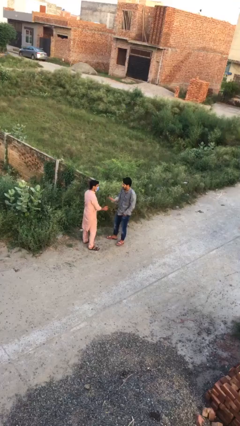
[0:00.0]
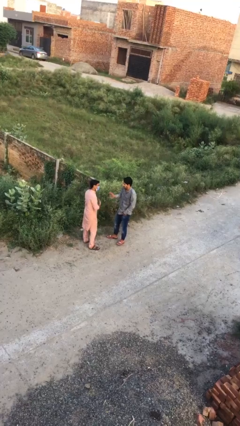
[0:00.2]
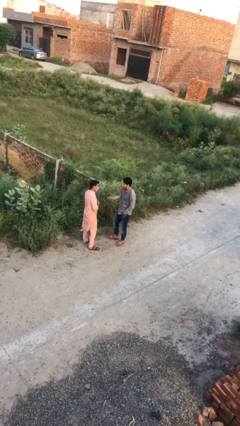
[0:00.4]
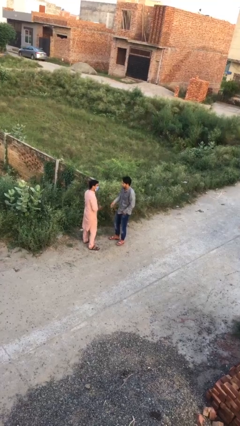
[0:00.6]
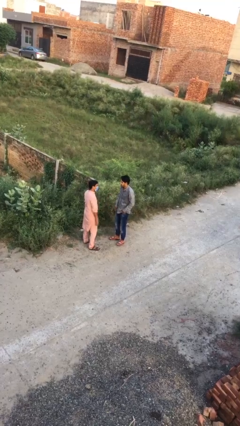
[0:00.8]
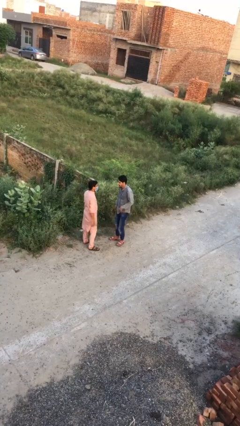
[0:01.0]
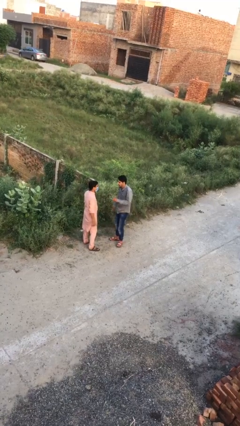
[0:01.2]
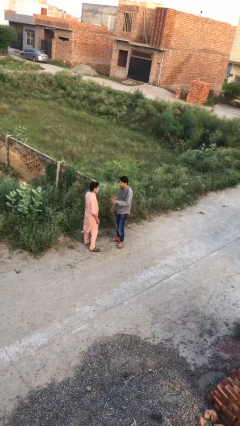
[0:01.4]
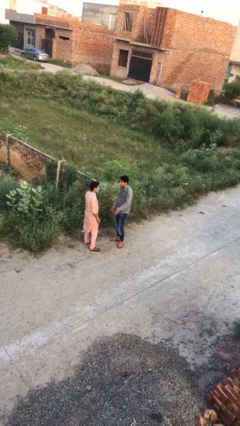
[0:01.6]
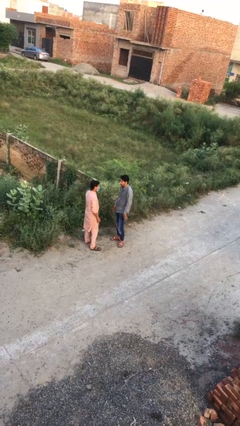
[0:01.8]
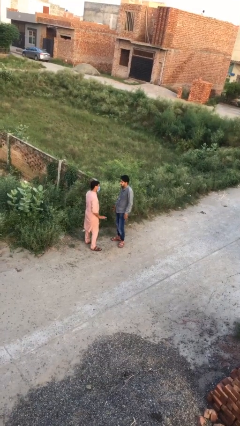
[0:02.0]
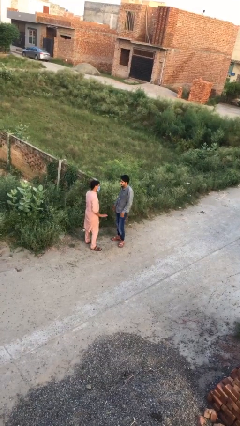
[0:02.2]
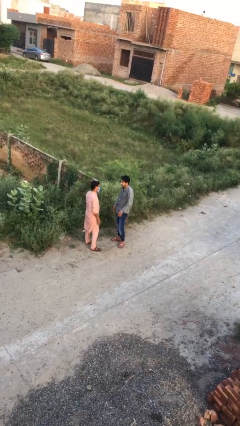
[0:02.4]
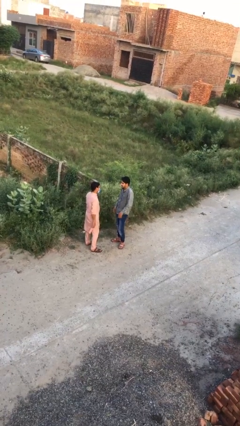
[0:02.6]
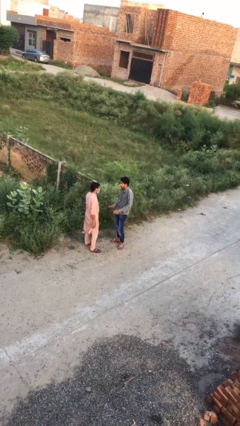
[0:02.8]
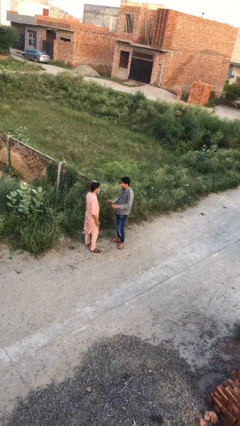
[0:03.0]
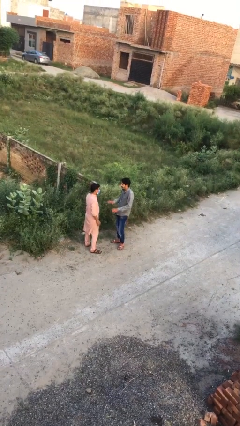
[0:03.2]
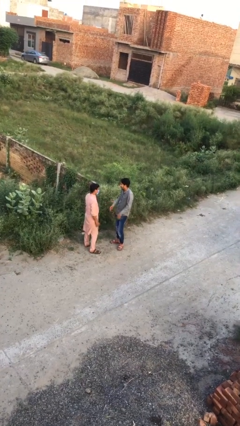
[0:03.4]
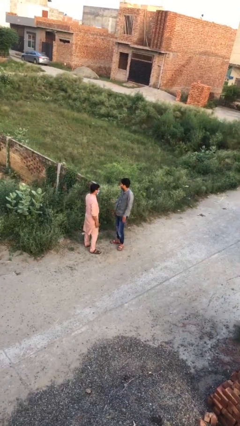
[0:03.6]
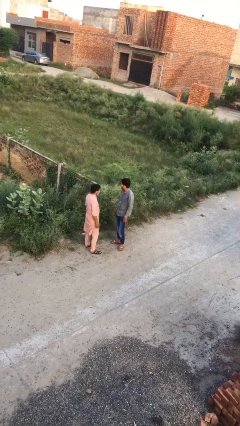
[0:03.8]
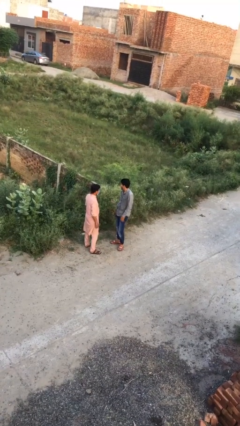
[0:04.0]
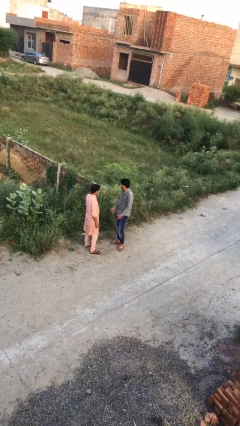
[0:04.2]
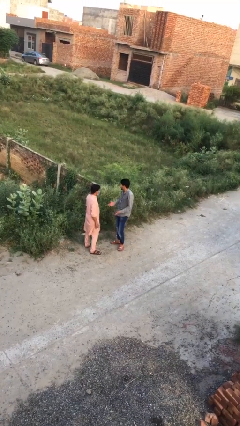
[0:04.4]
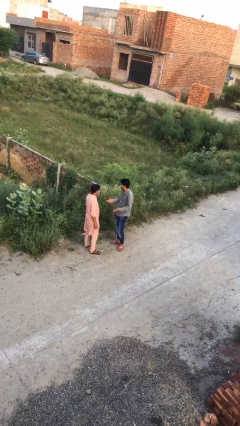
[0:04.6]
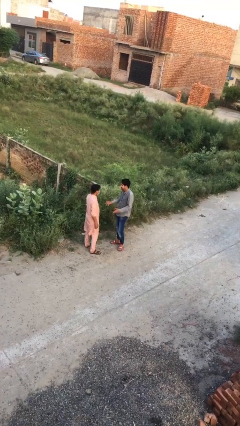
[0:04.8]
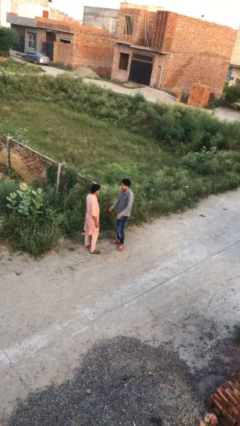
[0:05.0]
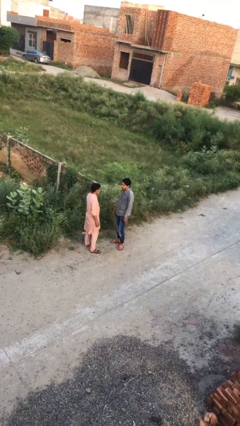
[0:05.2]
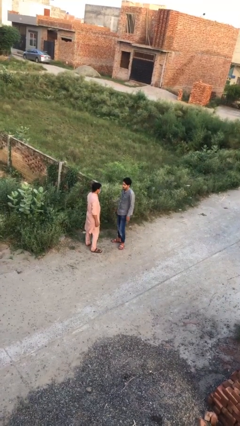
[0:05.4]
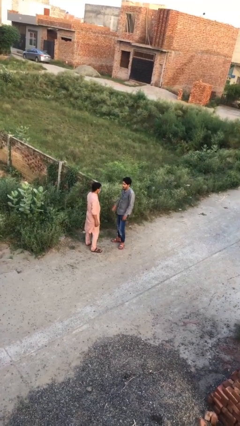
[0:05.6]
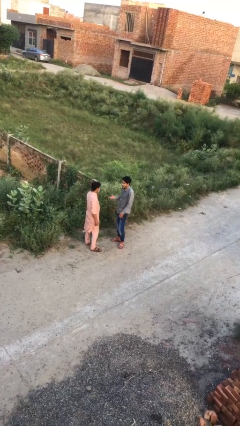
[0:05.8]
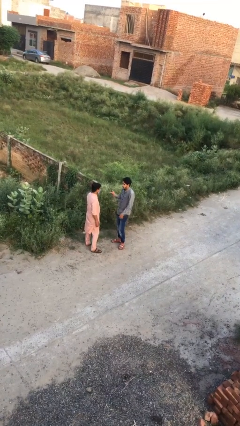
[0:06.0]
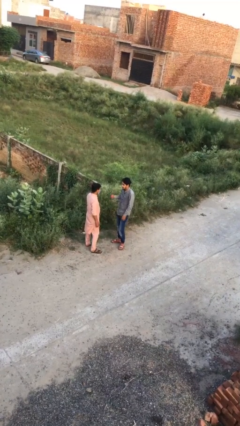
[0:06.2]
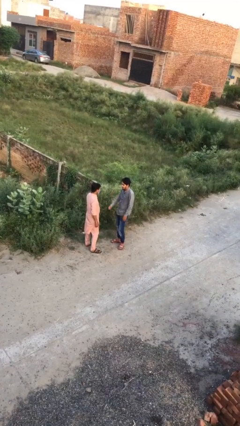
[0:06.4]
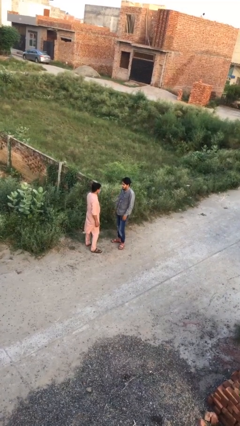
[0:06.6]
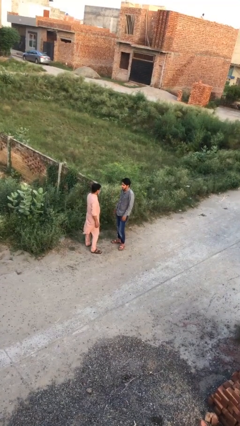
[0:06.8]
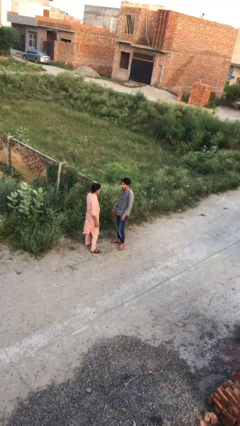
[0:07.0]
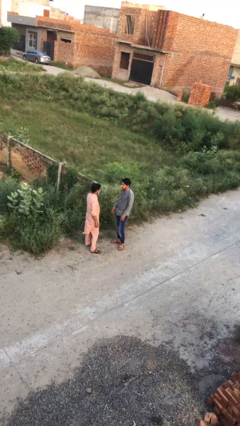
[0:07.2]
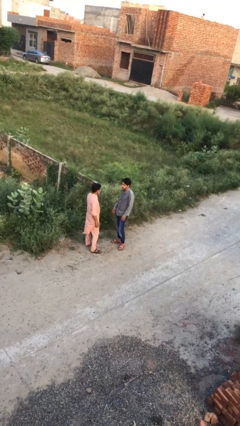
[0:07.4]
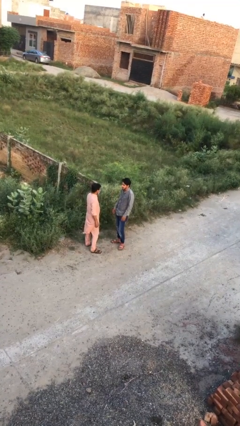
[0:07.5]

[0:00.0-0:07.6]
person talks to person

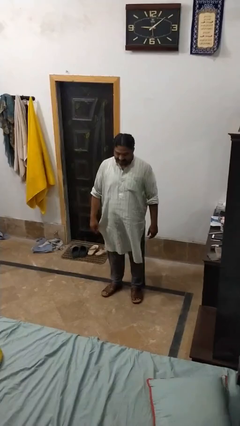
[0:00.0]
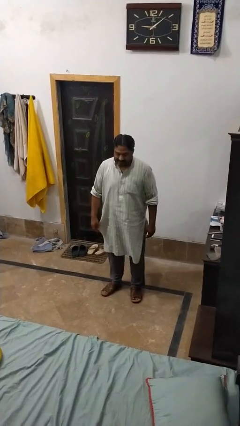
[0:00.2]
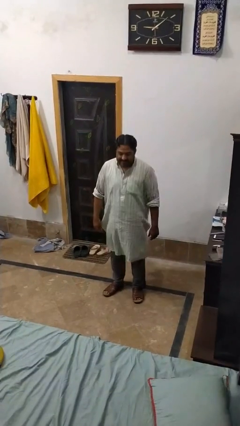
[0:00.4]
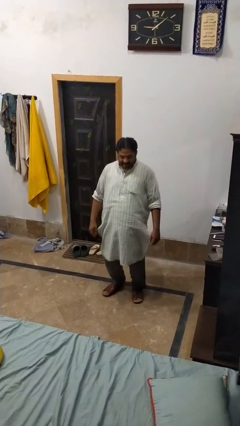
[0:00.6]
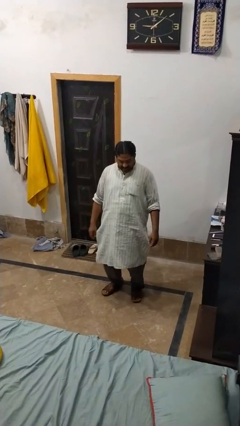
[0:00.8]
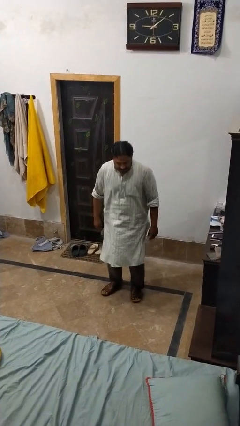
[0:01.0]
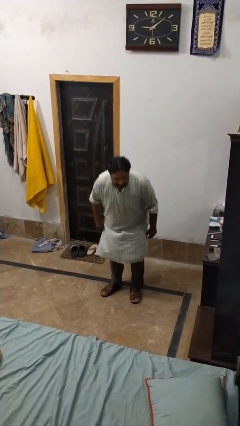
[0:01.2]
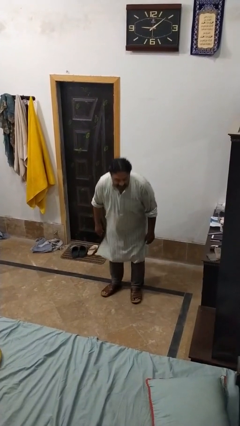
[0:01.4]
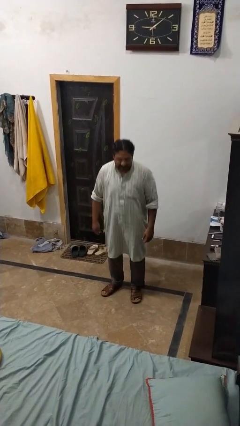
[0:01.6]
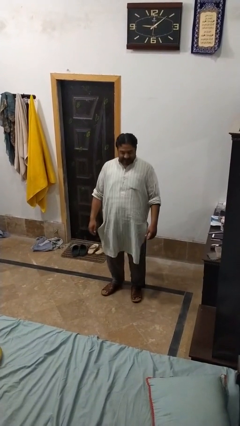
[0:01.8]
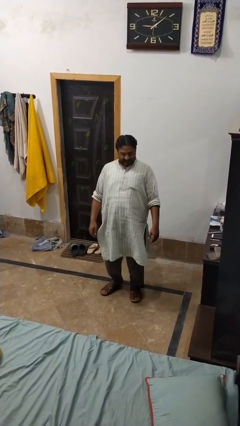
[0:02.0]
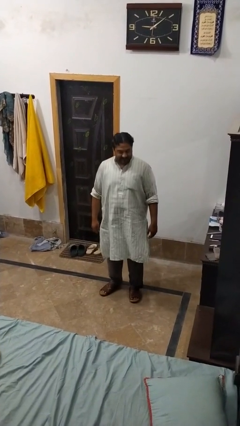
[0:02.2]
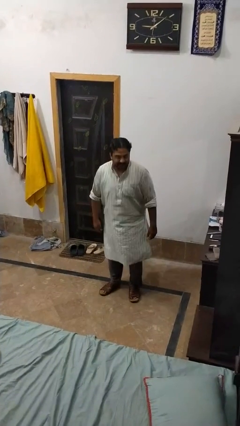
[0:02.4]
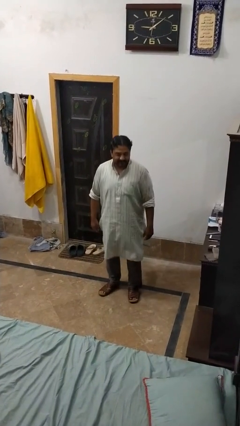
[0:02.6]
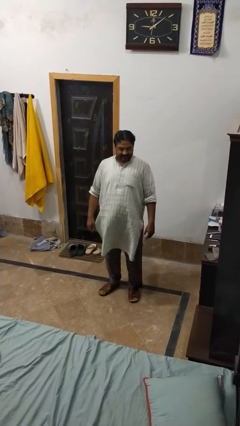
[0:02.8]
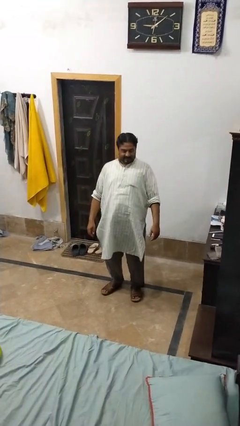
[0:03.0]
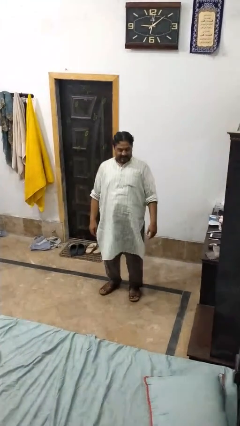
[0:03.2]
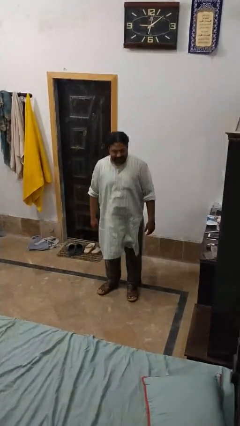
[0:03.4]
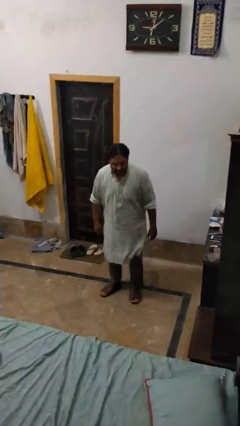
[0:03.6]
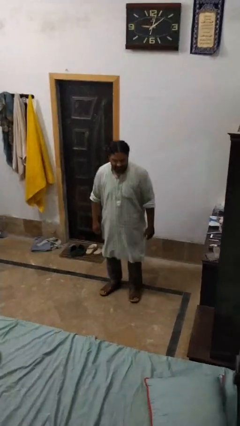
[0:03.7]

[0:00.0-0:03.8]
person wiggles hips

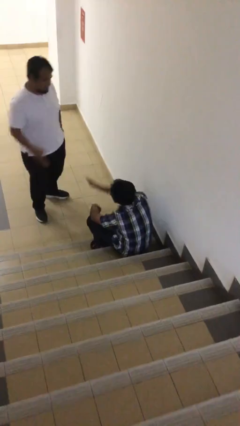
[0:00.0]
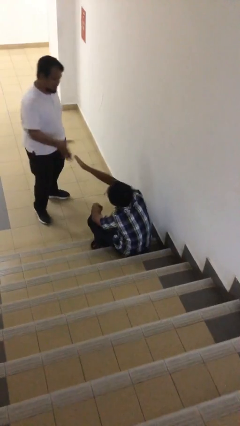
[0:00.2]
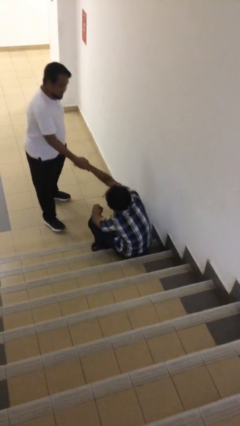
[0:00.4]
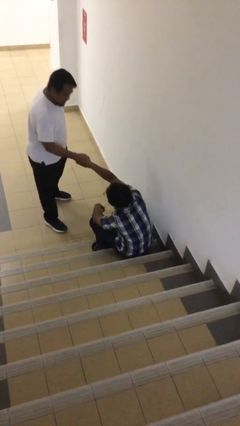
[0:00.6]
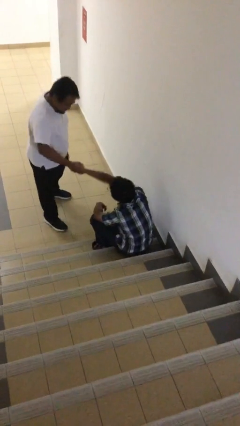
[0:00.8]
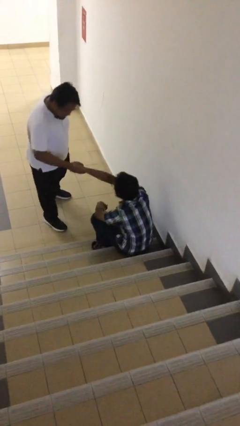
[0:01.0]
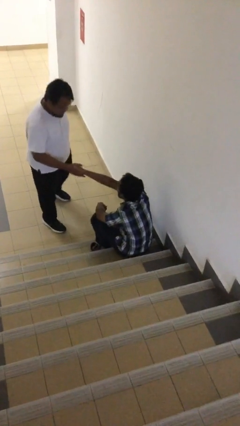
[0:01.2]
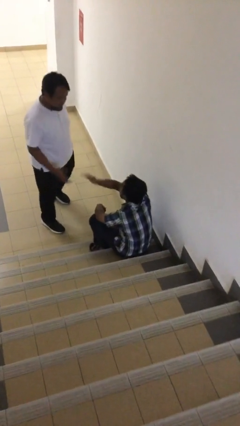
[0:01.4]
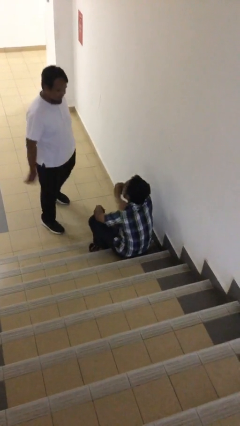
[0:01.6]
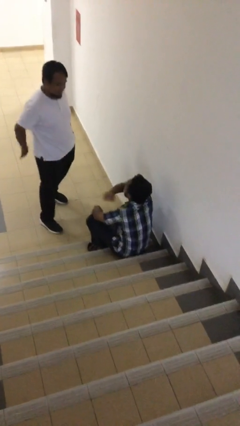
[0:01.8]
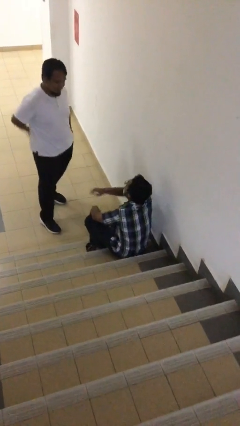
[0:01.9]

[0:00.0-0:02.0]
person shakes hand

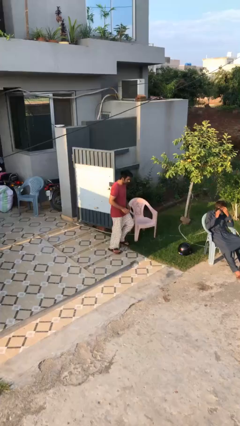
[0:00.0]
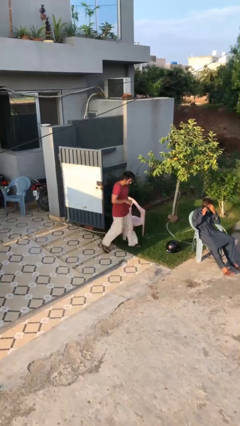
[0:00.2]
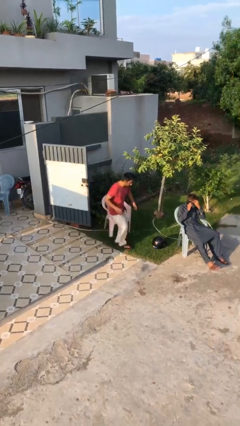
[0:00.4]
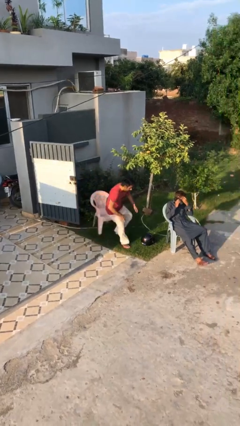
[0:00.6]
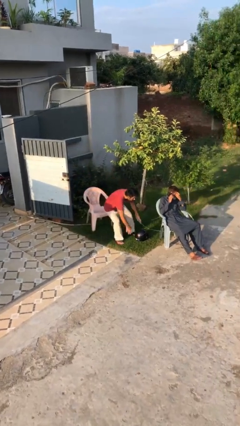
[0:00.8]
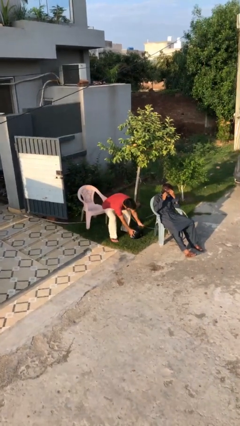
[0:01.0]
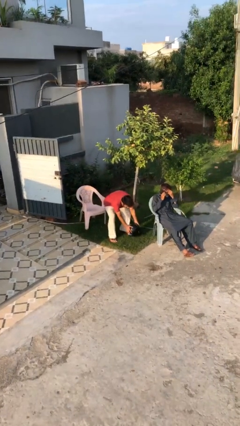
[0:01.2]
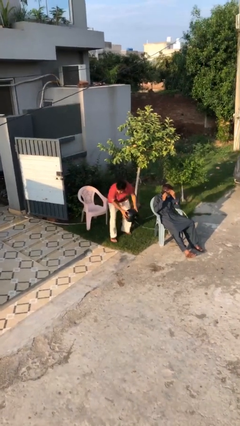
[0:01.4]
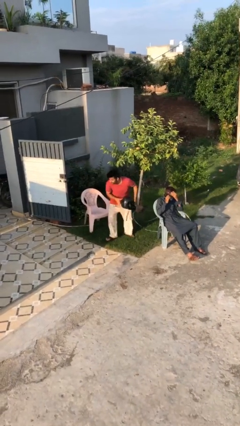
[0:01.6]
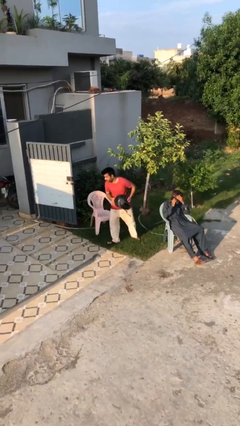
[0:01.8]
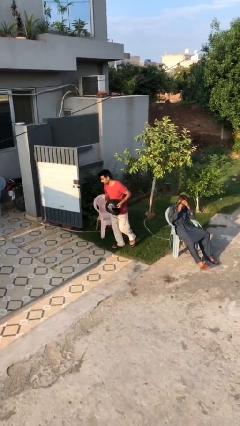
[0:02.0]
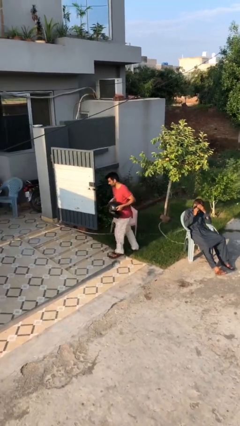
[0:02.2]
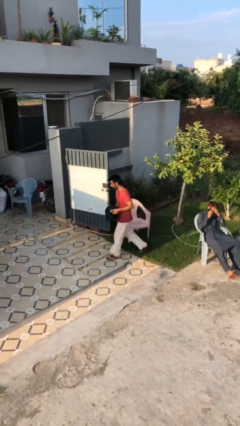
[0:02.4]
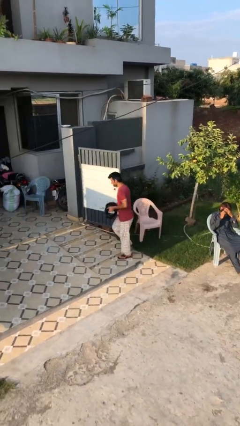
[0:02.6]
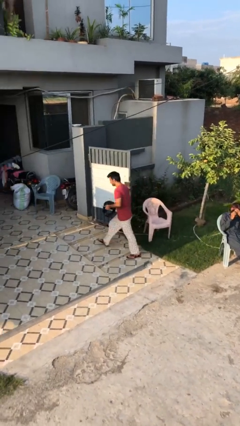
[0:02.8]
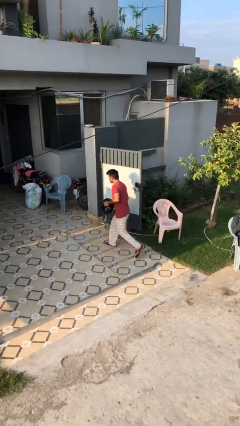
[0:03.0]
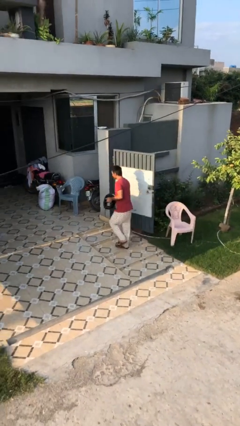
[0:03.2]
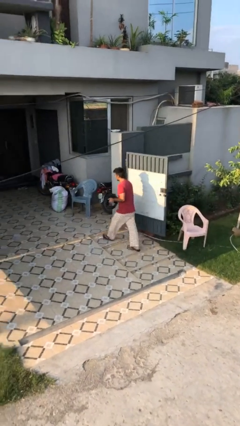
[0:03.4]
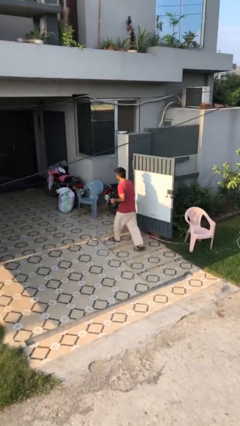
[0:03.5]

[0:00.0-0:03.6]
person steals object from person

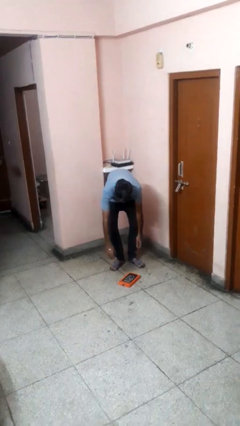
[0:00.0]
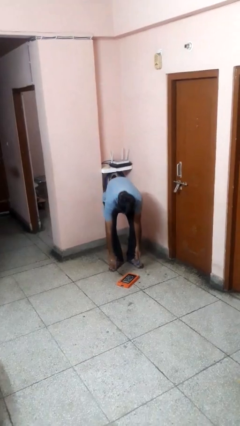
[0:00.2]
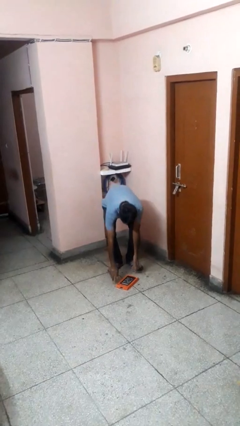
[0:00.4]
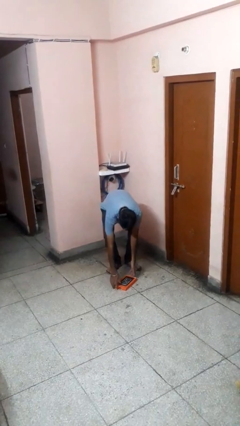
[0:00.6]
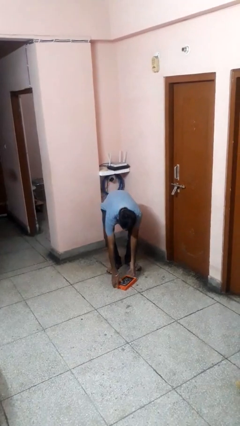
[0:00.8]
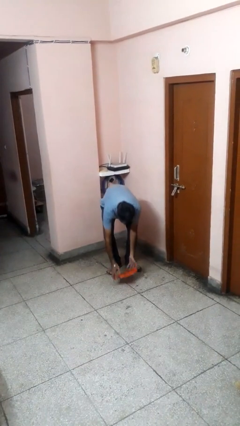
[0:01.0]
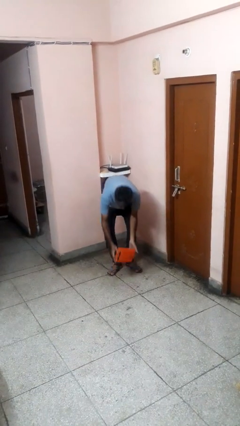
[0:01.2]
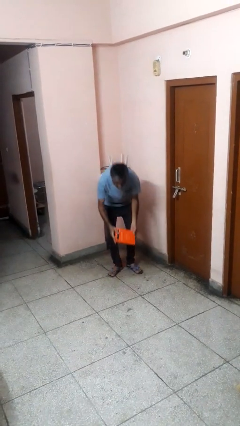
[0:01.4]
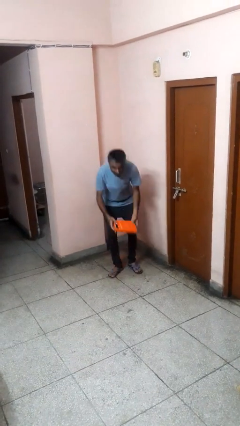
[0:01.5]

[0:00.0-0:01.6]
person picks up object from floor
